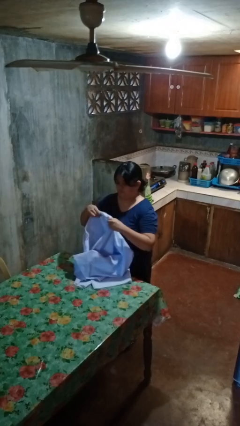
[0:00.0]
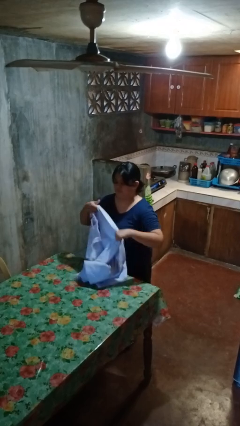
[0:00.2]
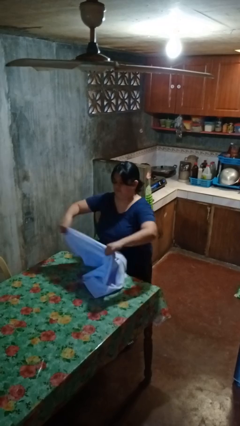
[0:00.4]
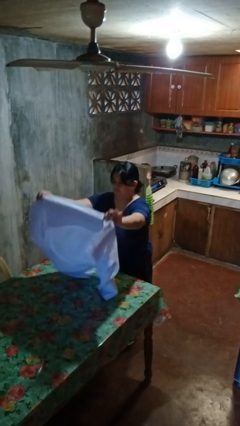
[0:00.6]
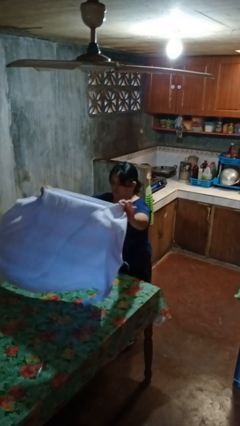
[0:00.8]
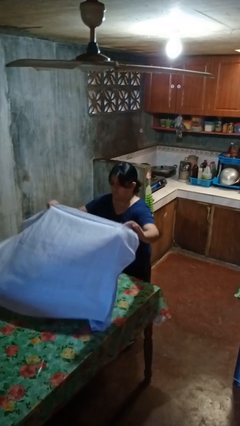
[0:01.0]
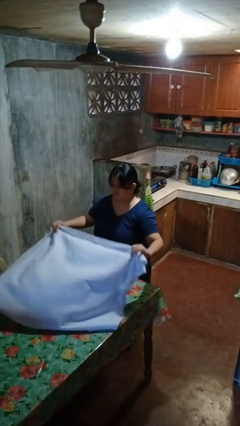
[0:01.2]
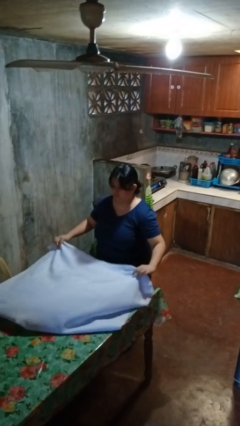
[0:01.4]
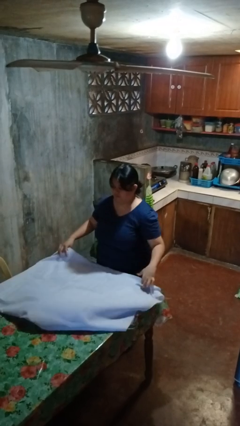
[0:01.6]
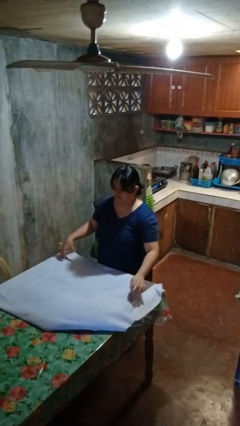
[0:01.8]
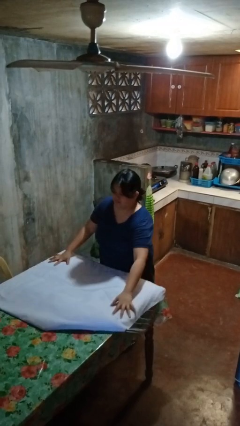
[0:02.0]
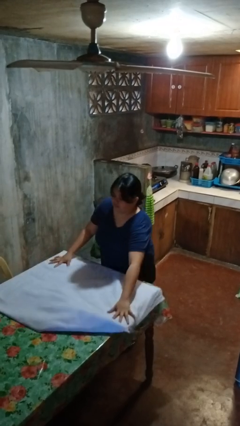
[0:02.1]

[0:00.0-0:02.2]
person spreads tablecloth

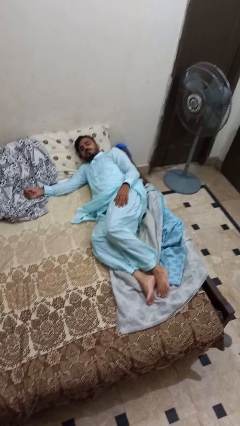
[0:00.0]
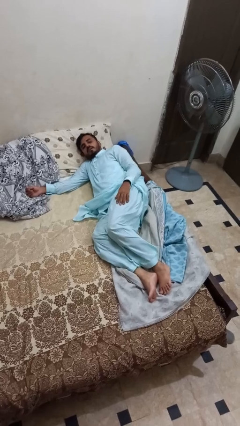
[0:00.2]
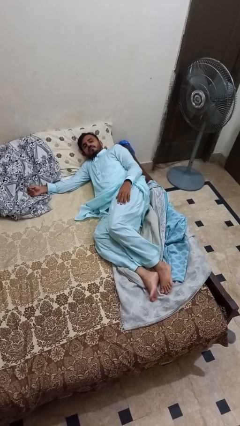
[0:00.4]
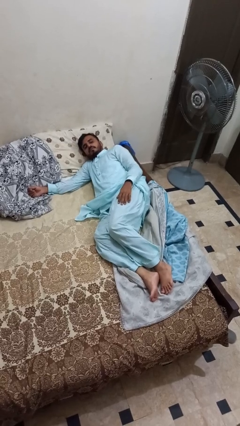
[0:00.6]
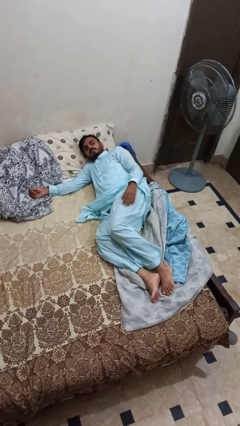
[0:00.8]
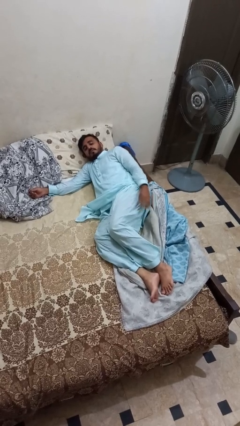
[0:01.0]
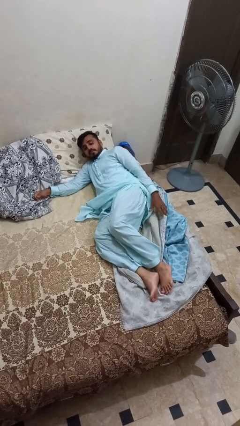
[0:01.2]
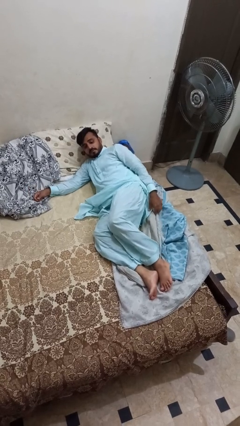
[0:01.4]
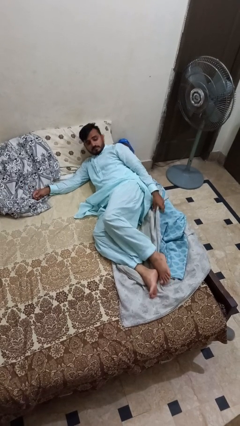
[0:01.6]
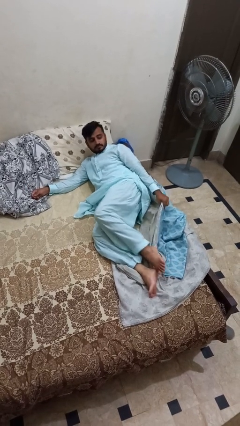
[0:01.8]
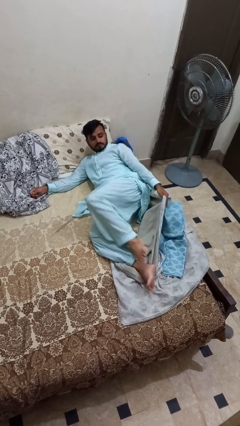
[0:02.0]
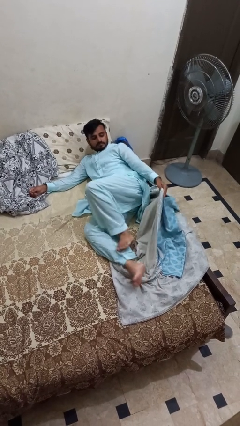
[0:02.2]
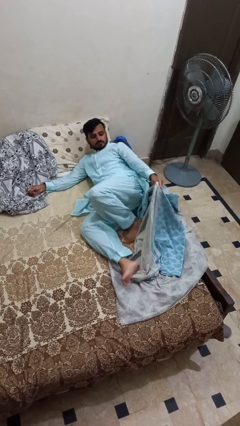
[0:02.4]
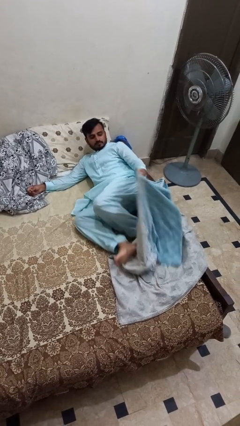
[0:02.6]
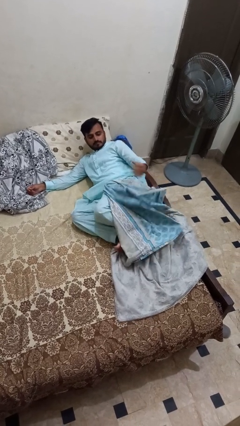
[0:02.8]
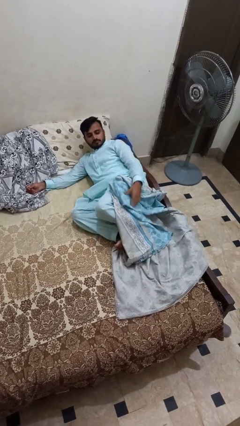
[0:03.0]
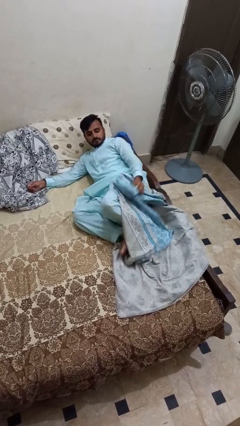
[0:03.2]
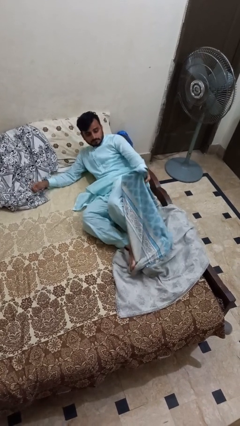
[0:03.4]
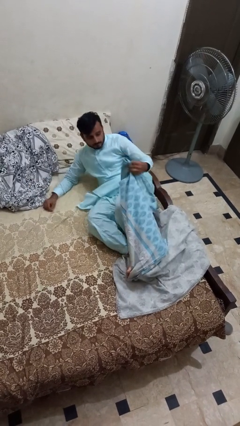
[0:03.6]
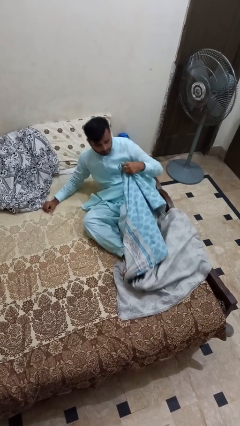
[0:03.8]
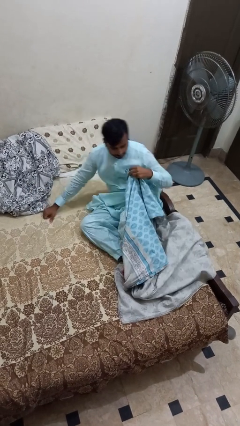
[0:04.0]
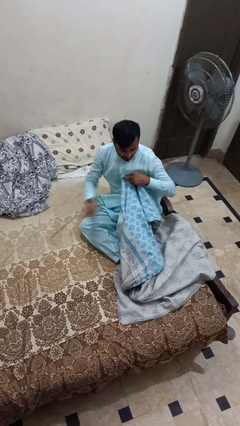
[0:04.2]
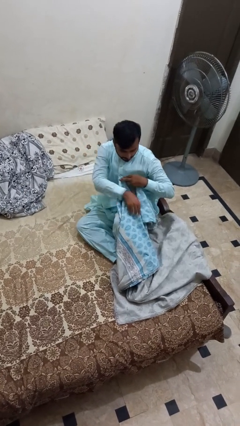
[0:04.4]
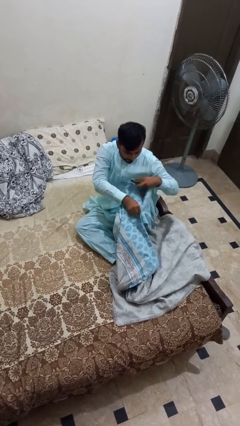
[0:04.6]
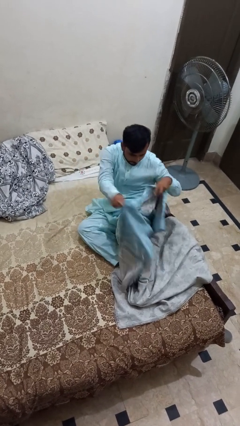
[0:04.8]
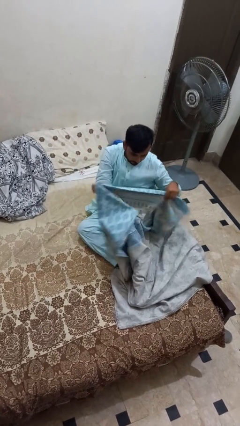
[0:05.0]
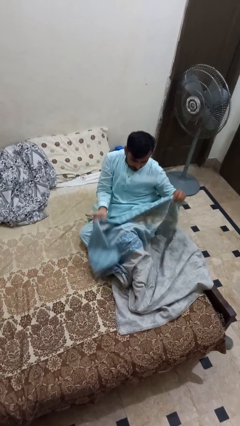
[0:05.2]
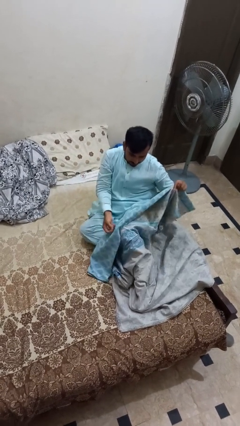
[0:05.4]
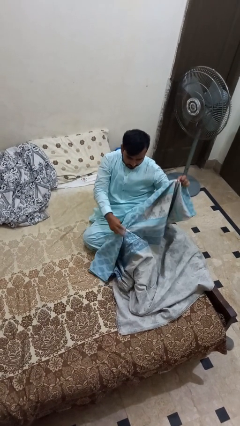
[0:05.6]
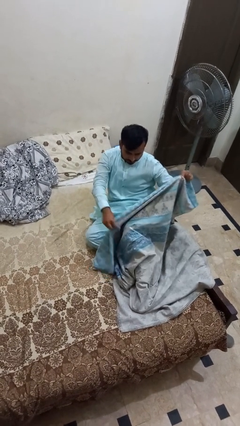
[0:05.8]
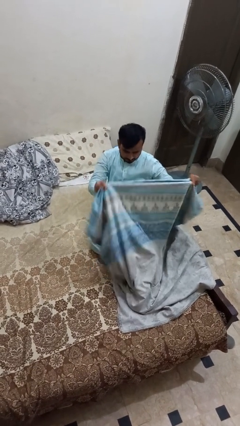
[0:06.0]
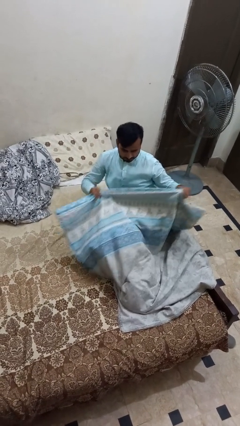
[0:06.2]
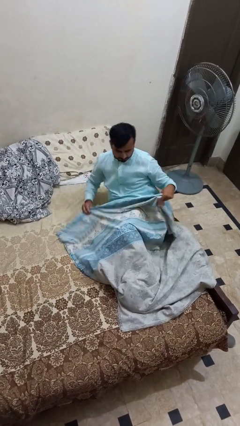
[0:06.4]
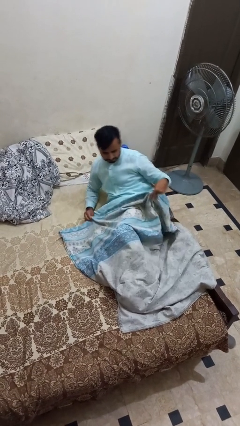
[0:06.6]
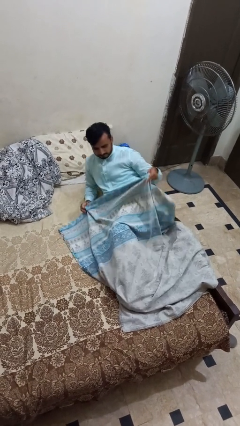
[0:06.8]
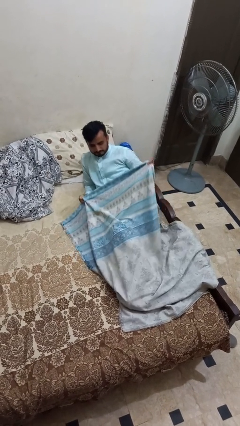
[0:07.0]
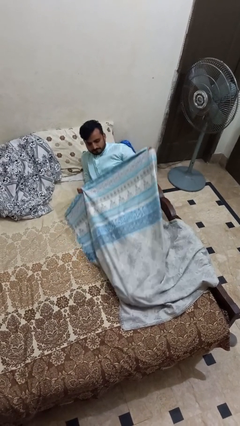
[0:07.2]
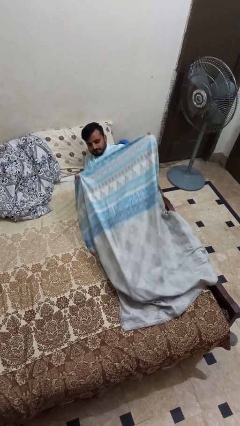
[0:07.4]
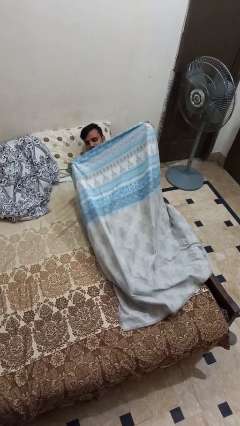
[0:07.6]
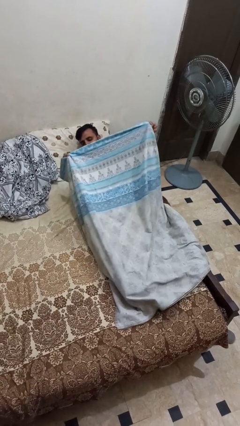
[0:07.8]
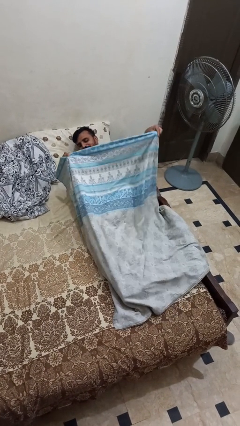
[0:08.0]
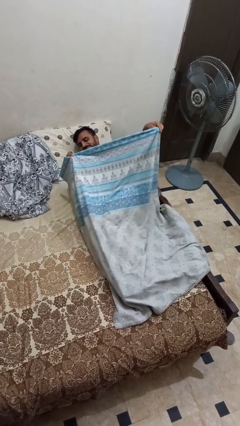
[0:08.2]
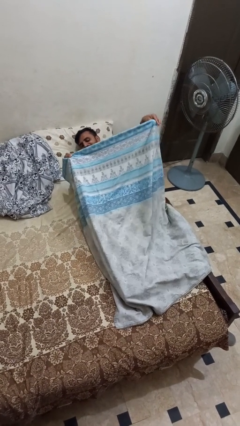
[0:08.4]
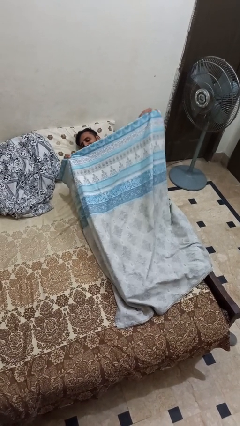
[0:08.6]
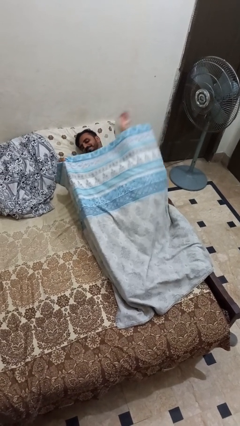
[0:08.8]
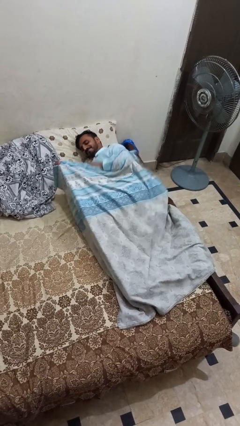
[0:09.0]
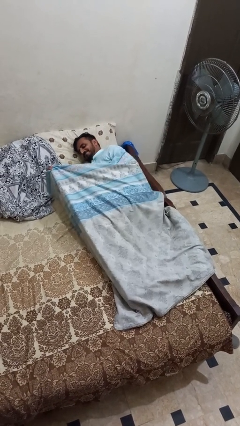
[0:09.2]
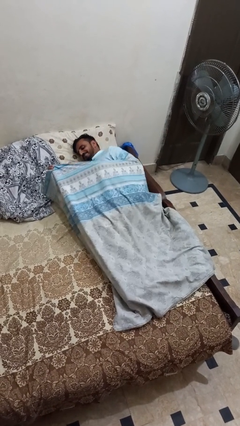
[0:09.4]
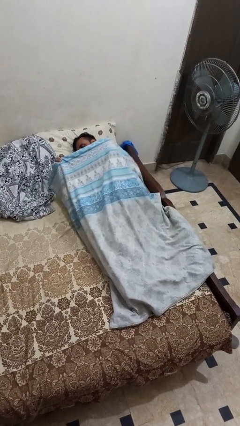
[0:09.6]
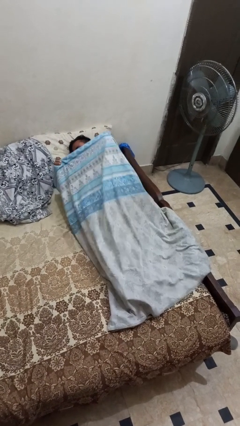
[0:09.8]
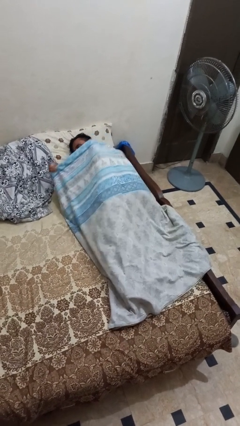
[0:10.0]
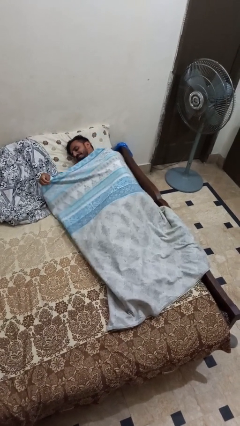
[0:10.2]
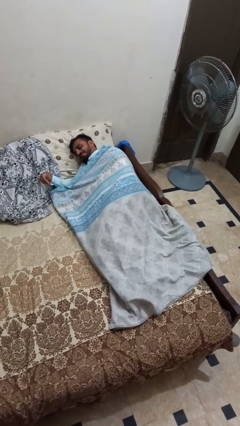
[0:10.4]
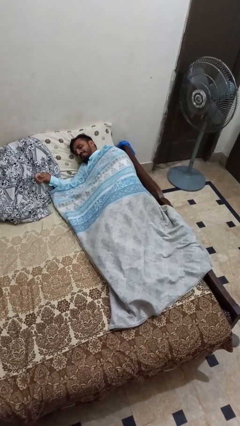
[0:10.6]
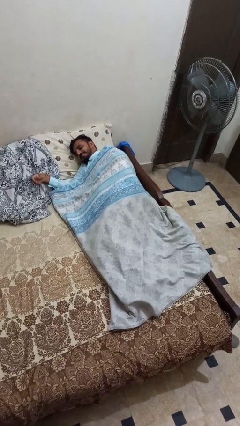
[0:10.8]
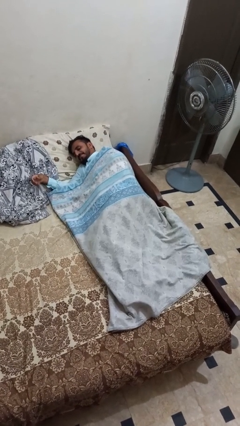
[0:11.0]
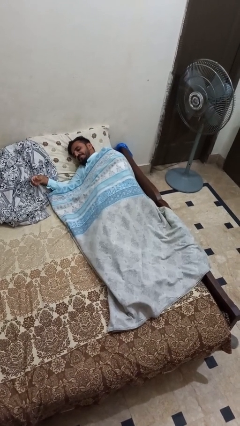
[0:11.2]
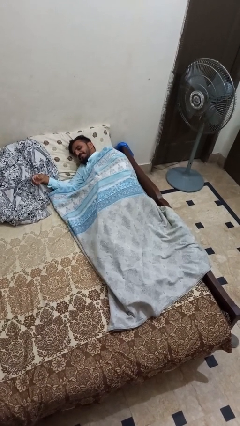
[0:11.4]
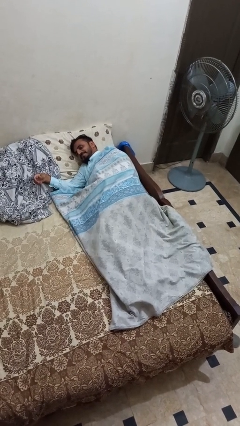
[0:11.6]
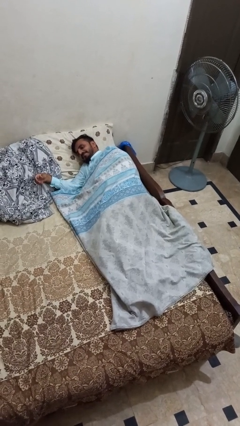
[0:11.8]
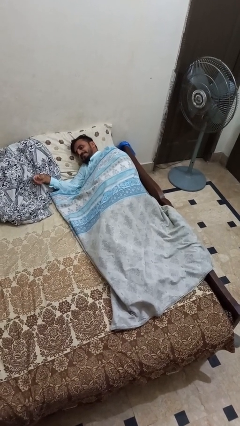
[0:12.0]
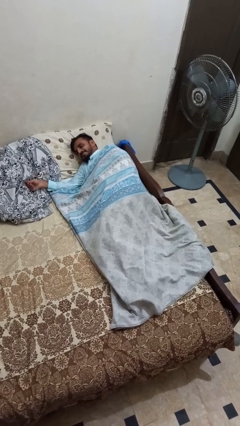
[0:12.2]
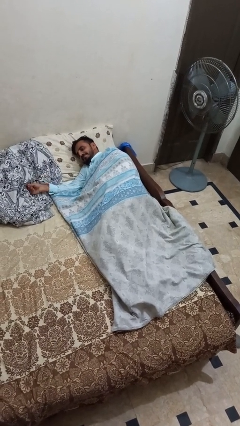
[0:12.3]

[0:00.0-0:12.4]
person covers with bedsheets

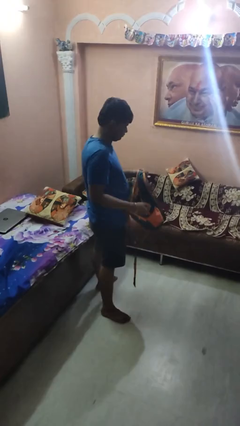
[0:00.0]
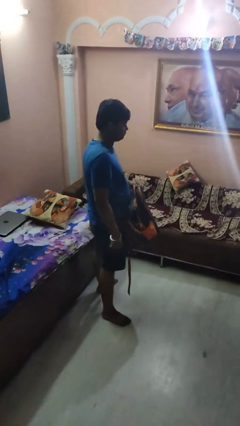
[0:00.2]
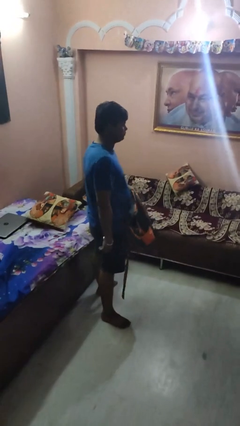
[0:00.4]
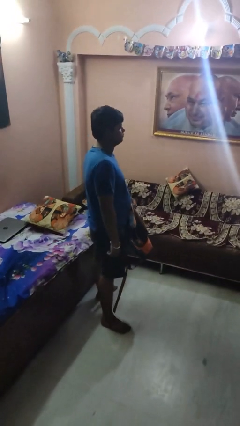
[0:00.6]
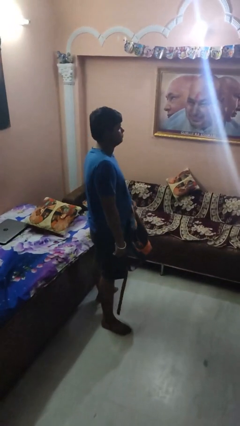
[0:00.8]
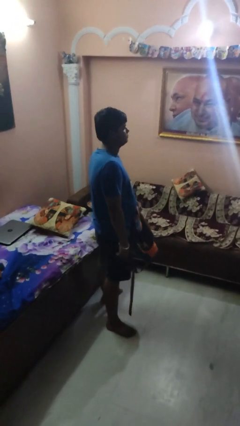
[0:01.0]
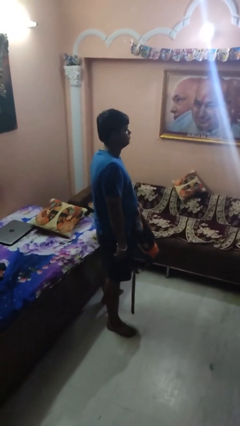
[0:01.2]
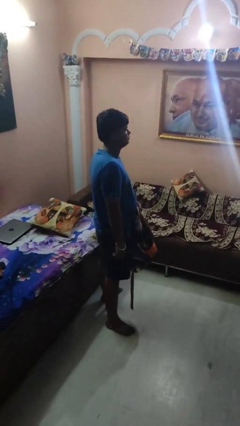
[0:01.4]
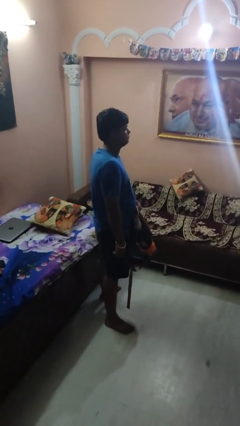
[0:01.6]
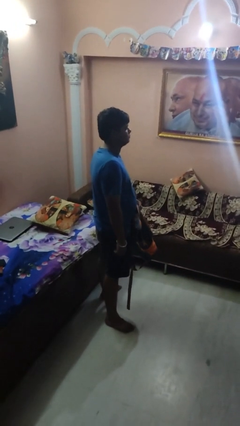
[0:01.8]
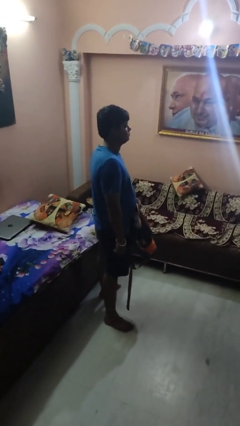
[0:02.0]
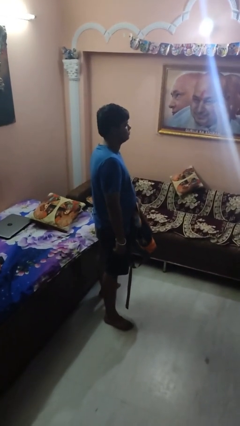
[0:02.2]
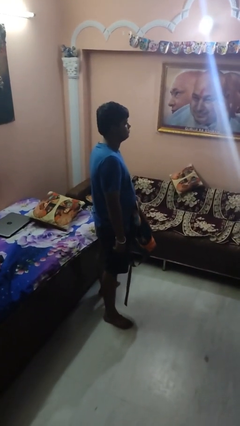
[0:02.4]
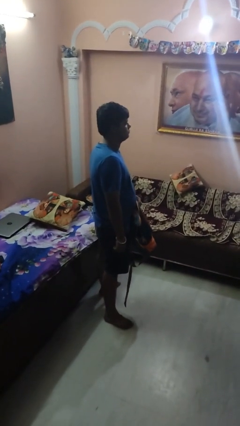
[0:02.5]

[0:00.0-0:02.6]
person puts object into backpack

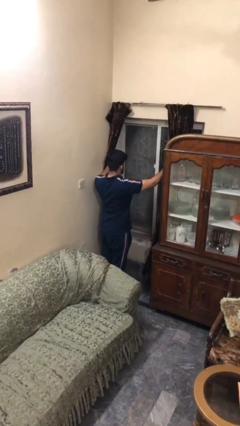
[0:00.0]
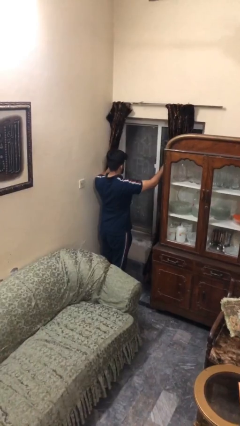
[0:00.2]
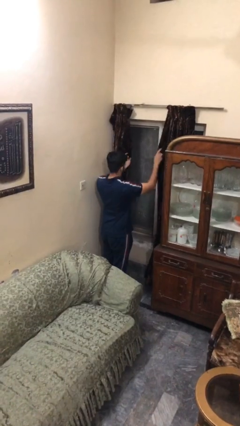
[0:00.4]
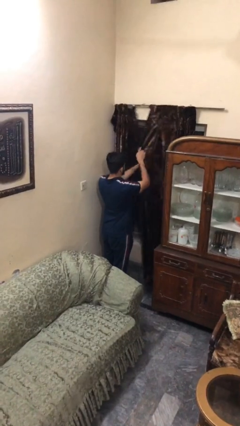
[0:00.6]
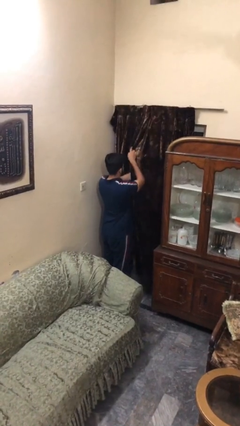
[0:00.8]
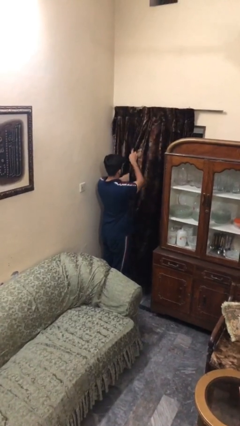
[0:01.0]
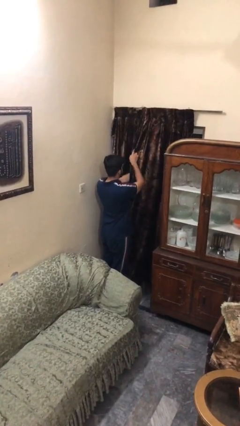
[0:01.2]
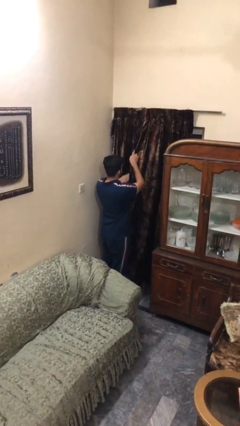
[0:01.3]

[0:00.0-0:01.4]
person closes curtains
